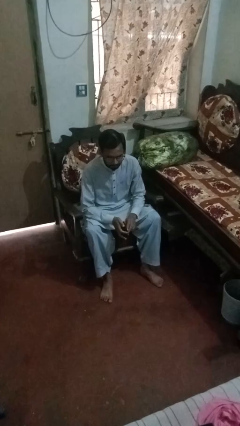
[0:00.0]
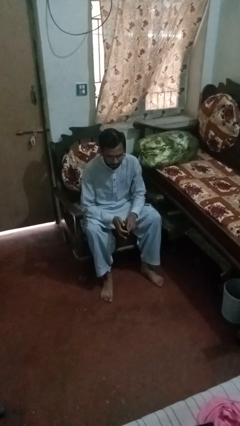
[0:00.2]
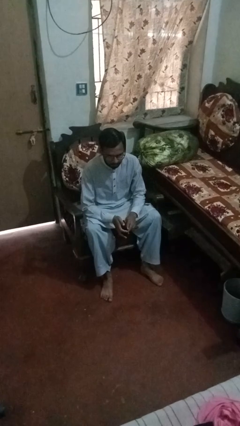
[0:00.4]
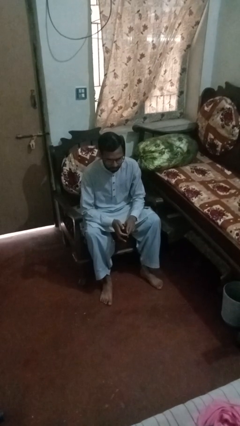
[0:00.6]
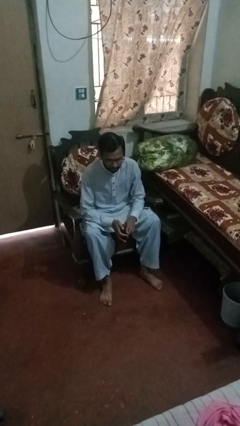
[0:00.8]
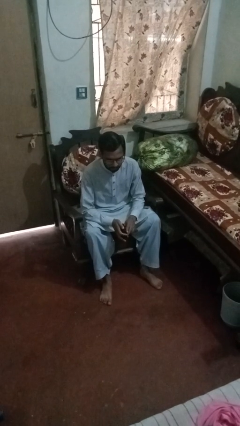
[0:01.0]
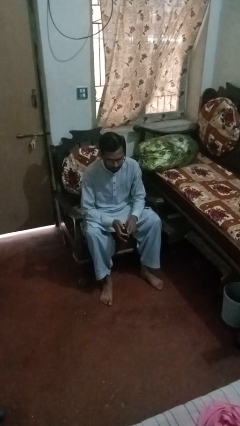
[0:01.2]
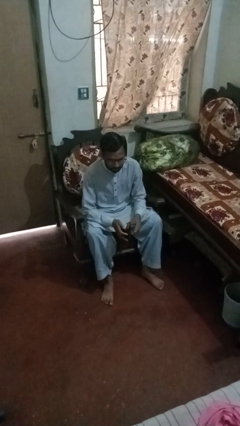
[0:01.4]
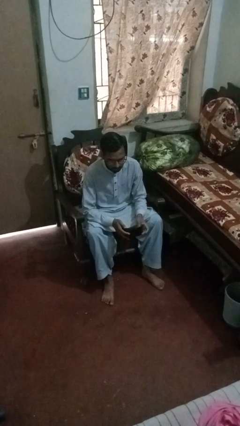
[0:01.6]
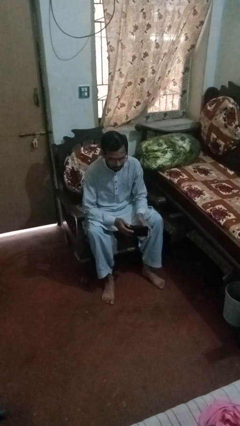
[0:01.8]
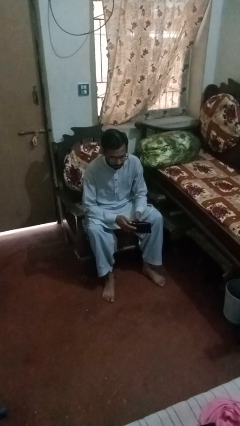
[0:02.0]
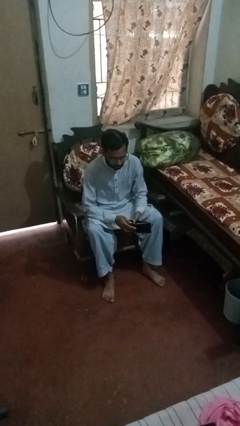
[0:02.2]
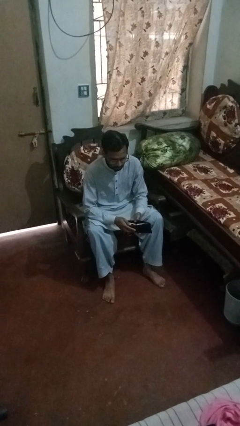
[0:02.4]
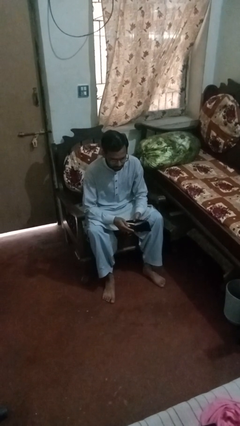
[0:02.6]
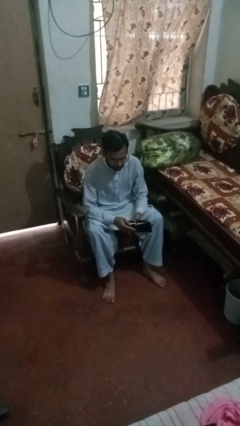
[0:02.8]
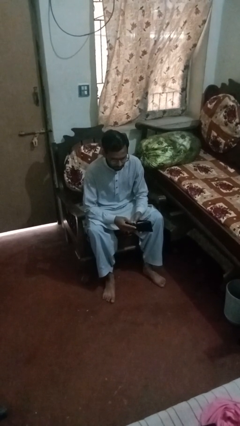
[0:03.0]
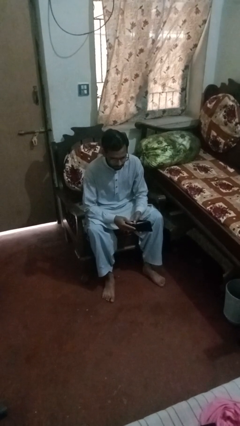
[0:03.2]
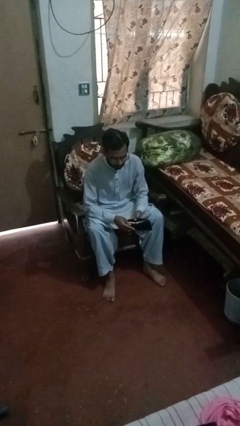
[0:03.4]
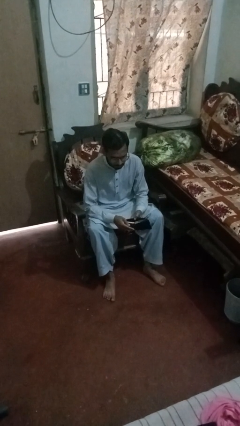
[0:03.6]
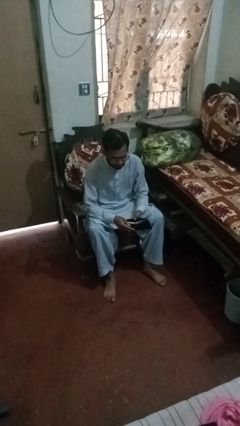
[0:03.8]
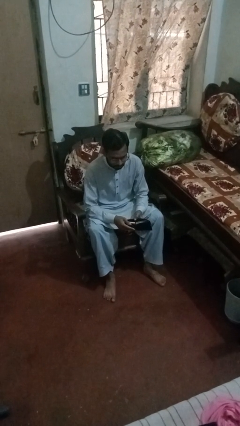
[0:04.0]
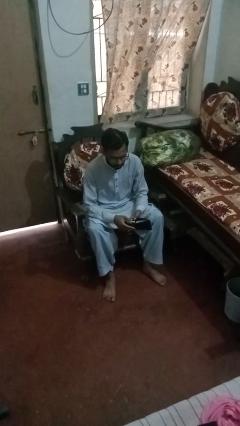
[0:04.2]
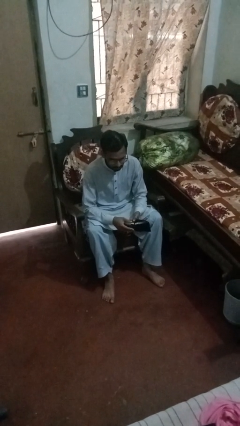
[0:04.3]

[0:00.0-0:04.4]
person searches in purse

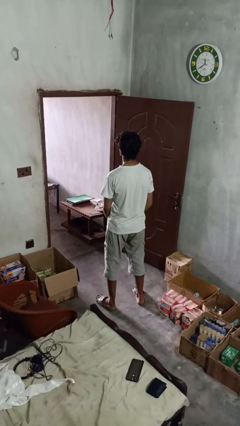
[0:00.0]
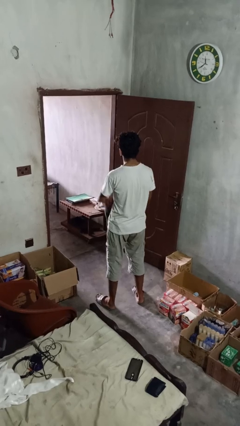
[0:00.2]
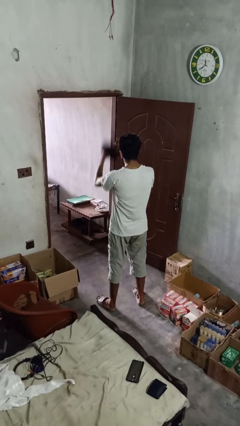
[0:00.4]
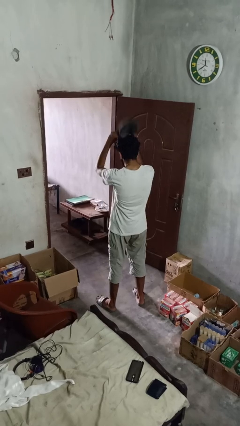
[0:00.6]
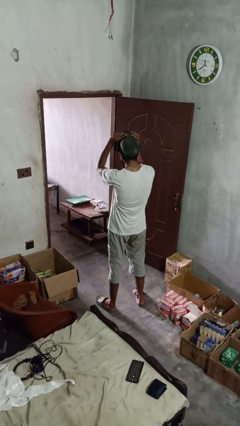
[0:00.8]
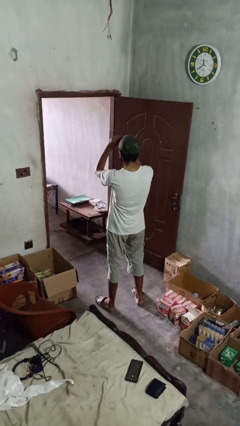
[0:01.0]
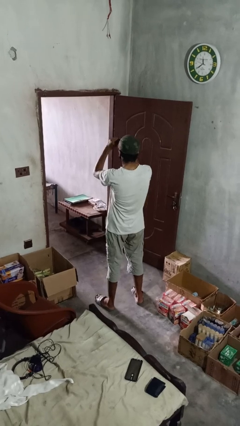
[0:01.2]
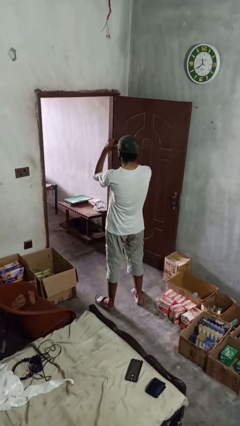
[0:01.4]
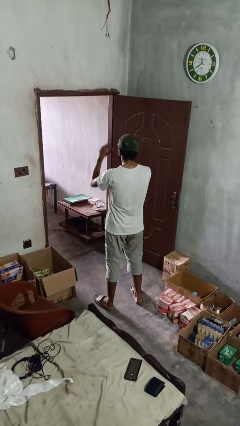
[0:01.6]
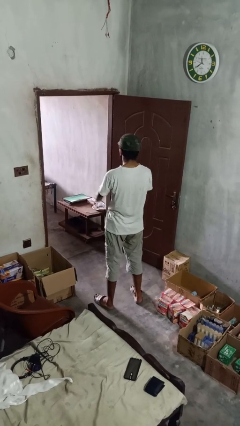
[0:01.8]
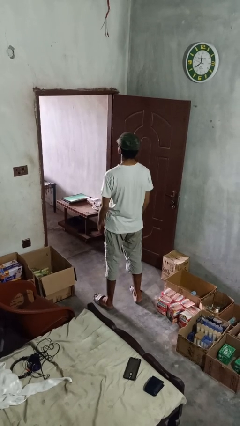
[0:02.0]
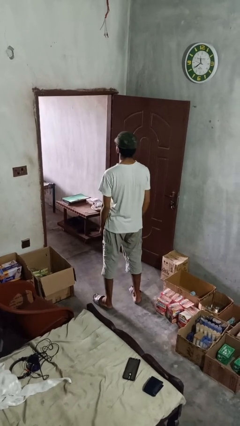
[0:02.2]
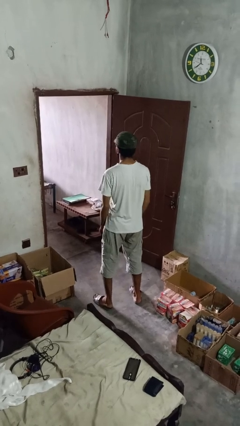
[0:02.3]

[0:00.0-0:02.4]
person puts on hat

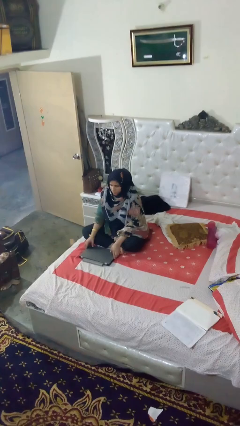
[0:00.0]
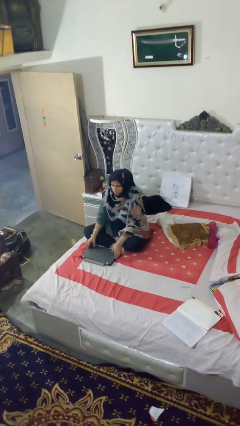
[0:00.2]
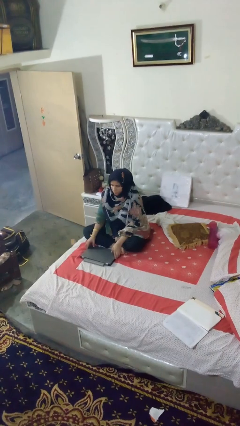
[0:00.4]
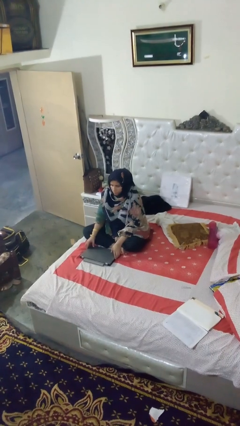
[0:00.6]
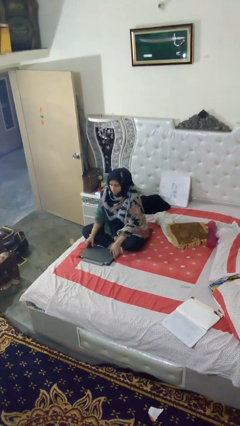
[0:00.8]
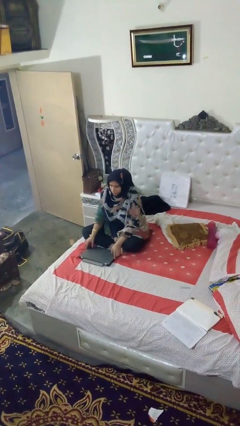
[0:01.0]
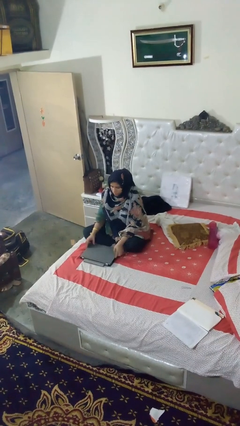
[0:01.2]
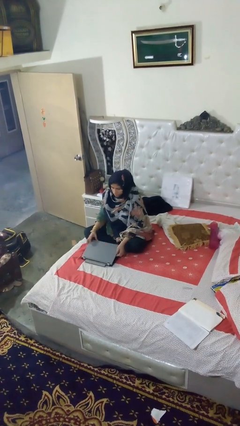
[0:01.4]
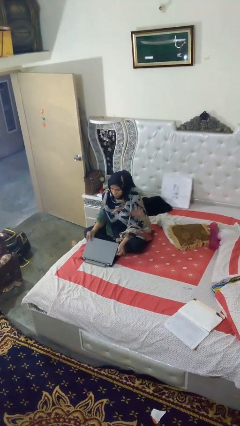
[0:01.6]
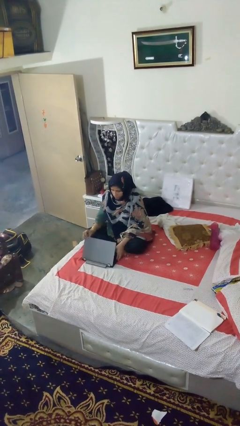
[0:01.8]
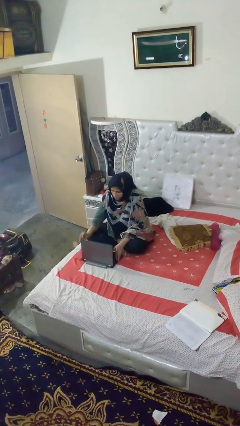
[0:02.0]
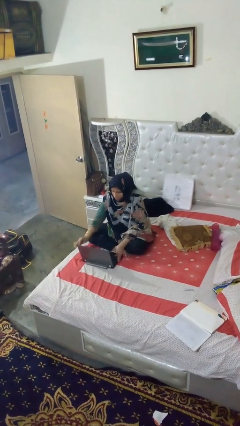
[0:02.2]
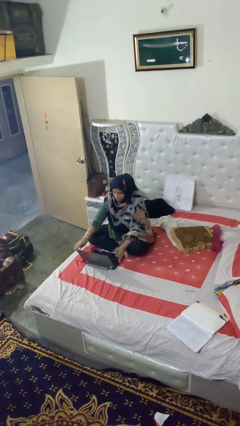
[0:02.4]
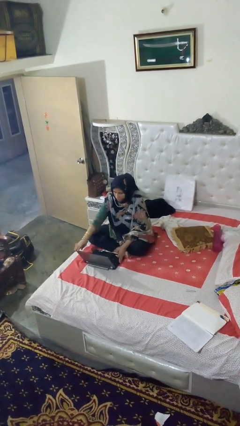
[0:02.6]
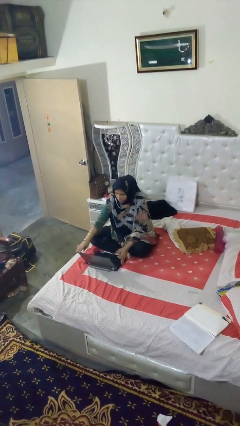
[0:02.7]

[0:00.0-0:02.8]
person opens laptop

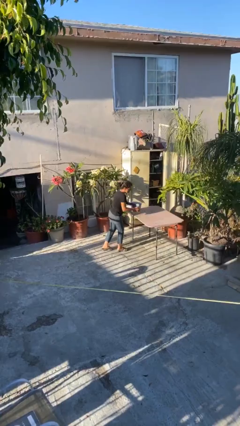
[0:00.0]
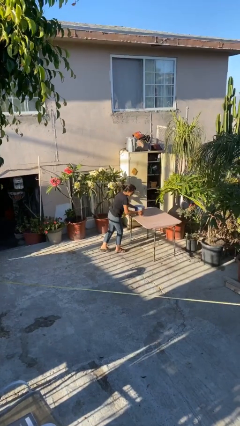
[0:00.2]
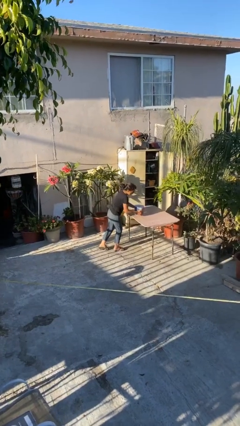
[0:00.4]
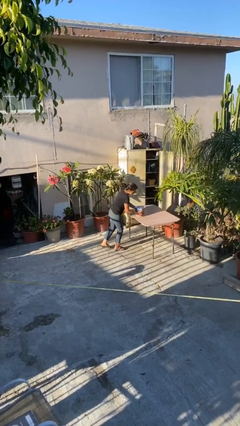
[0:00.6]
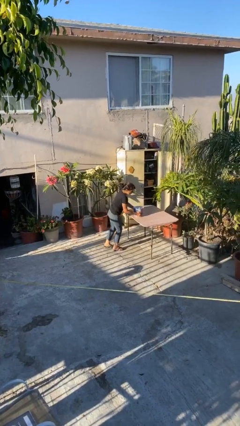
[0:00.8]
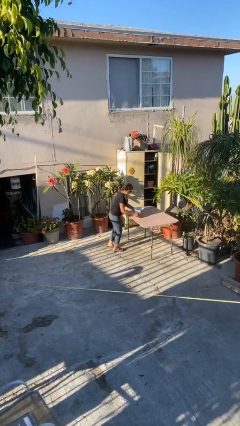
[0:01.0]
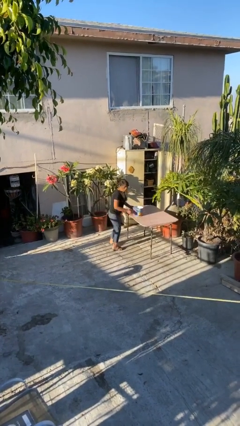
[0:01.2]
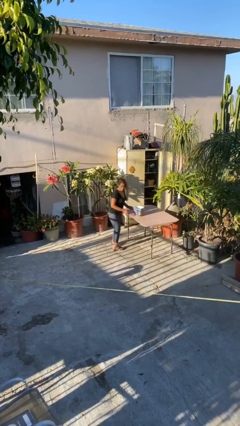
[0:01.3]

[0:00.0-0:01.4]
person puts down object on table

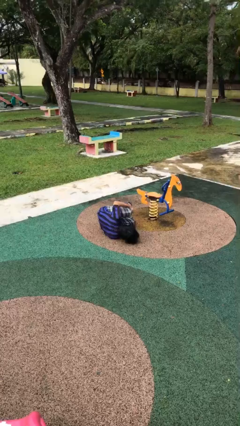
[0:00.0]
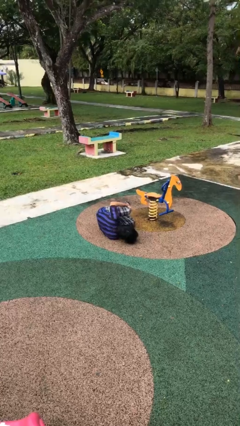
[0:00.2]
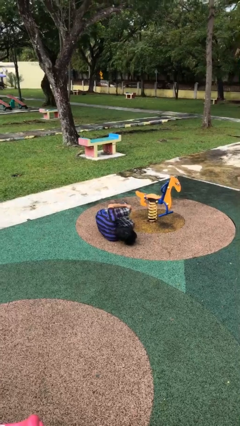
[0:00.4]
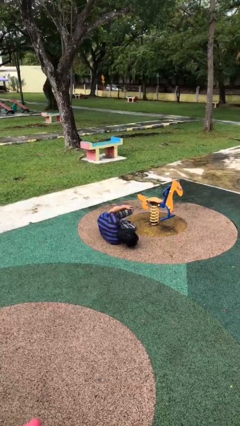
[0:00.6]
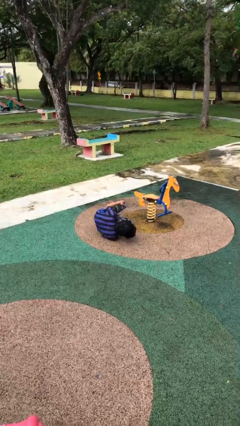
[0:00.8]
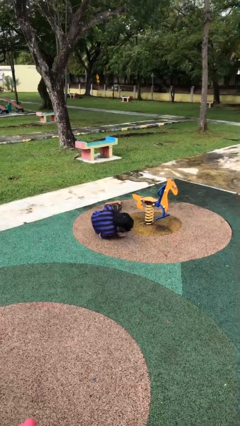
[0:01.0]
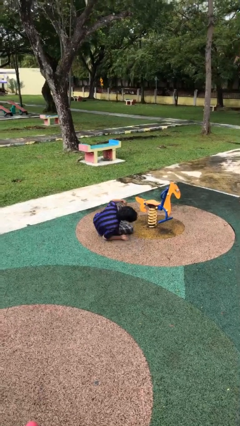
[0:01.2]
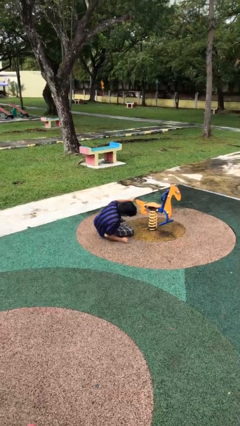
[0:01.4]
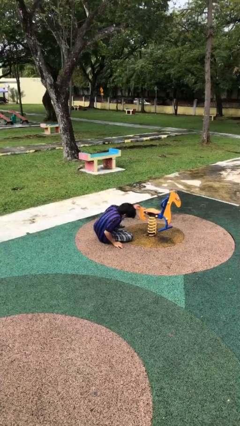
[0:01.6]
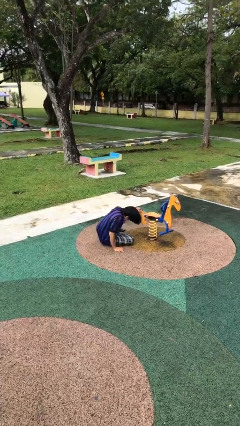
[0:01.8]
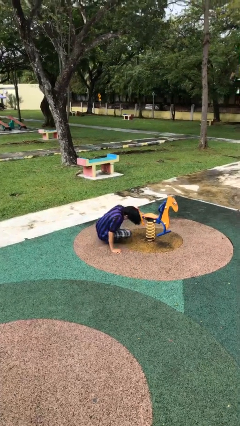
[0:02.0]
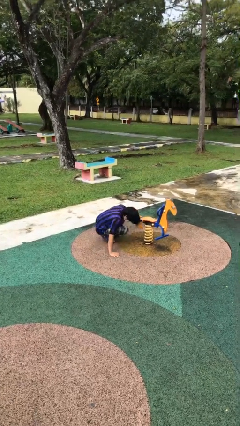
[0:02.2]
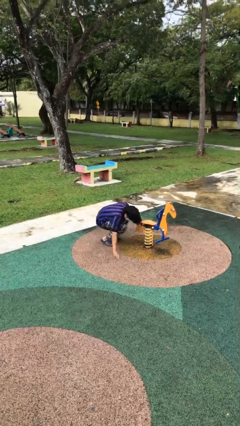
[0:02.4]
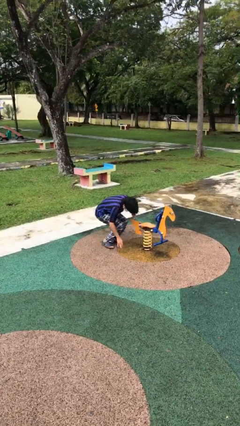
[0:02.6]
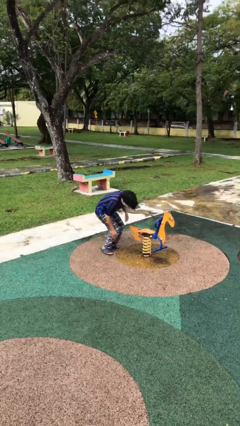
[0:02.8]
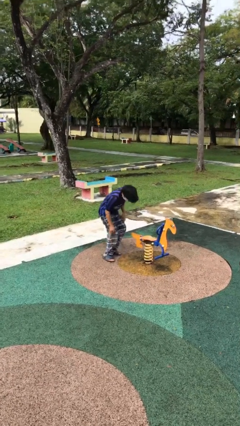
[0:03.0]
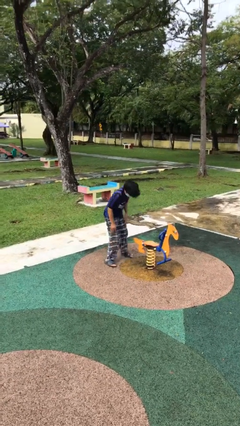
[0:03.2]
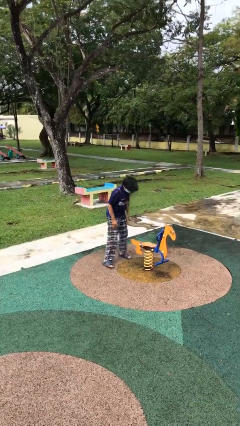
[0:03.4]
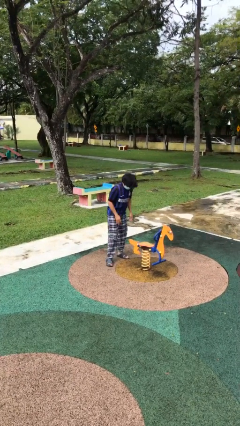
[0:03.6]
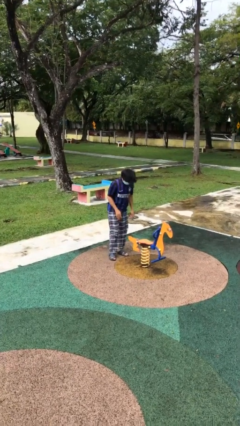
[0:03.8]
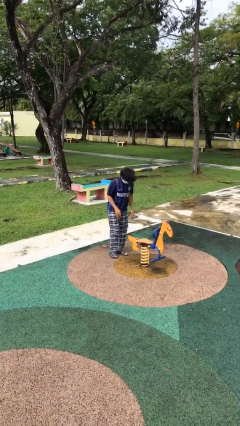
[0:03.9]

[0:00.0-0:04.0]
person stands up from floor

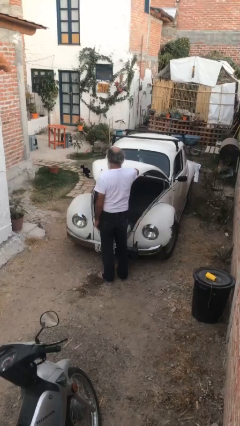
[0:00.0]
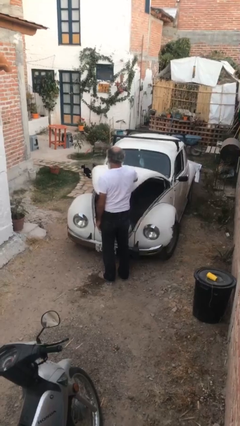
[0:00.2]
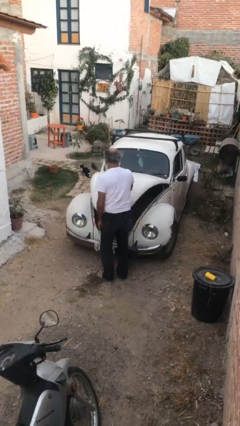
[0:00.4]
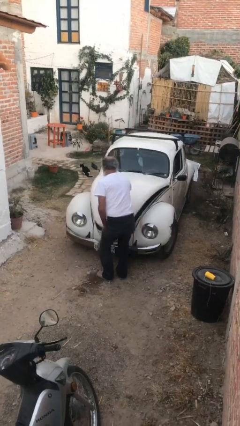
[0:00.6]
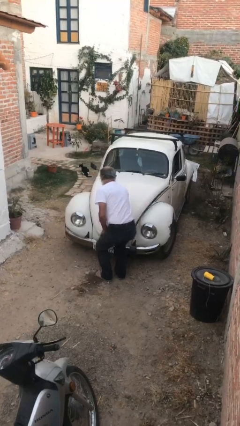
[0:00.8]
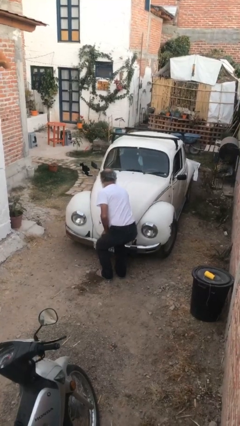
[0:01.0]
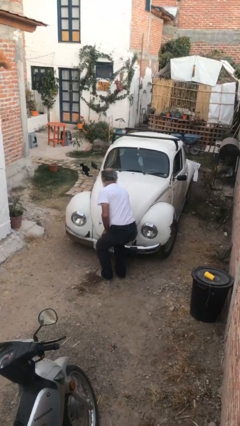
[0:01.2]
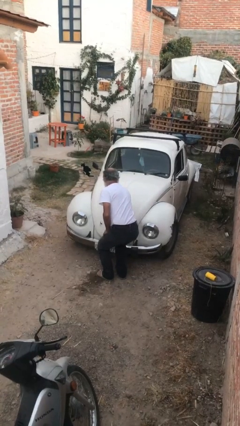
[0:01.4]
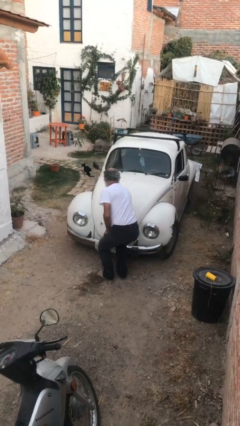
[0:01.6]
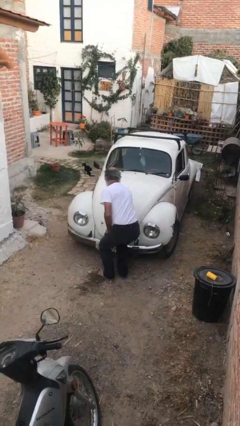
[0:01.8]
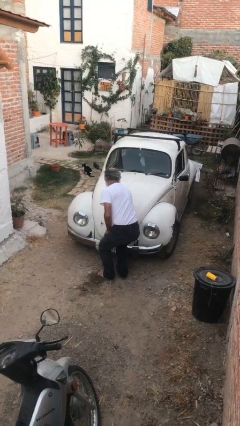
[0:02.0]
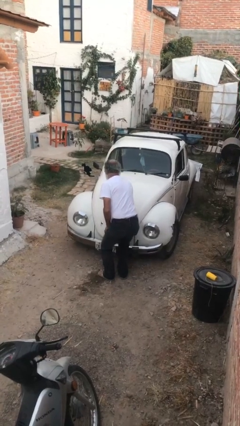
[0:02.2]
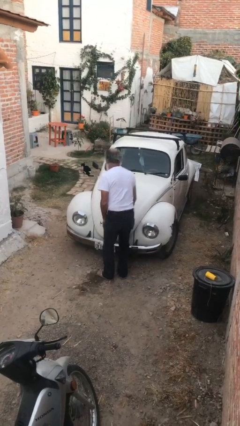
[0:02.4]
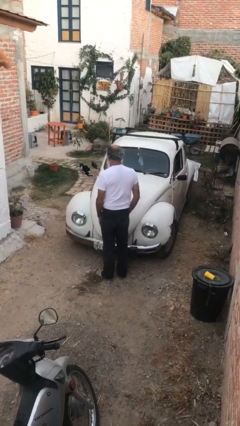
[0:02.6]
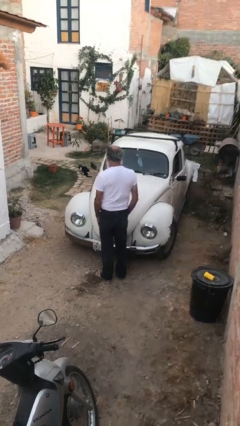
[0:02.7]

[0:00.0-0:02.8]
person closes car trunk
